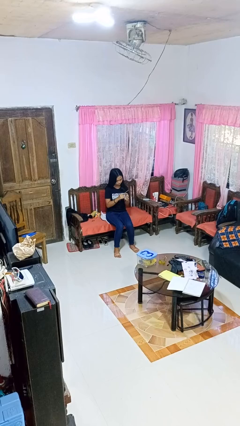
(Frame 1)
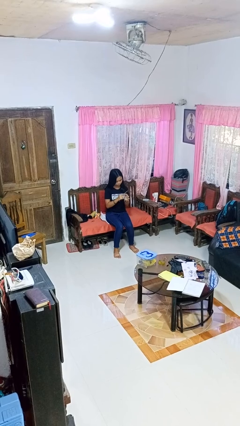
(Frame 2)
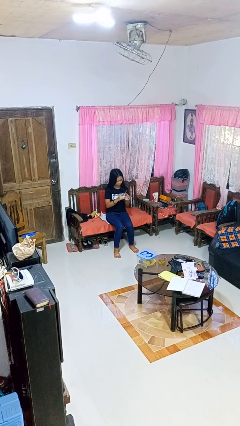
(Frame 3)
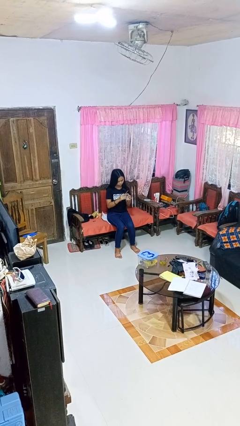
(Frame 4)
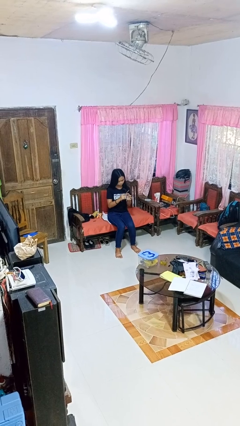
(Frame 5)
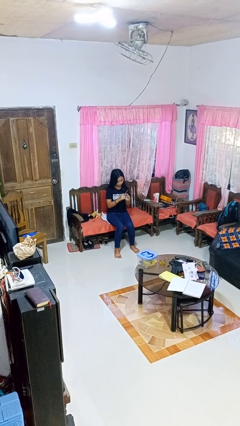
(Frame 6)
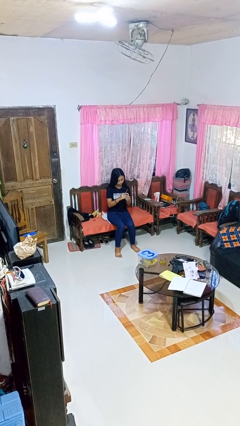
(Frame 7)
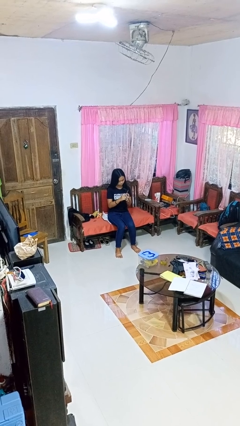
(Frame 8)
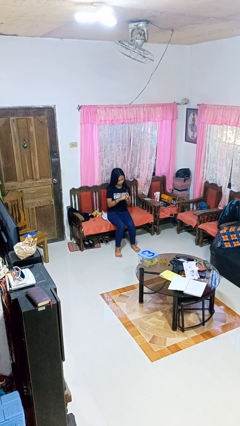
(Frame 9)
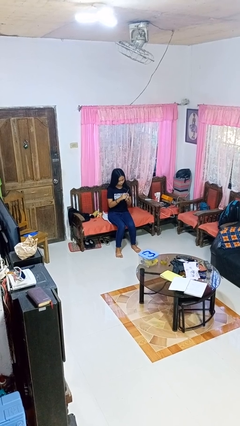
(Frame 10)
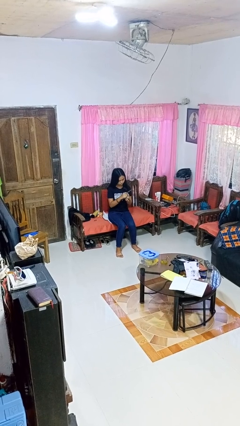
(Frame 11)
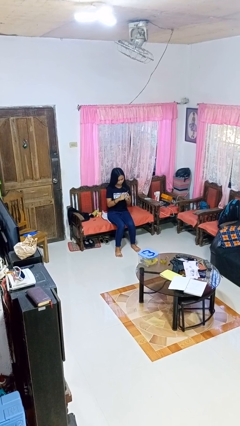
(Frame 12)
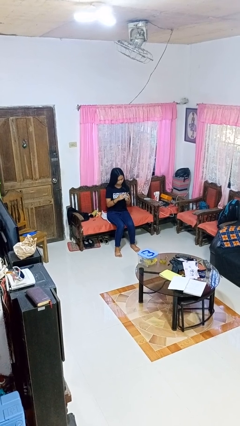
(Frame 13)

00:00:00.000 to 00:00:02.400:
person files fingernails

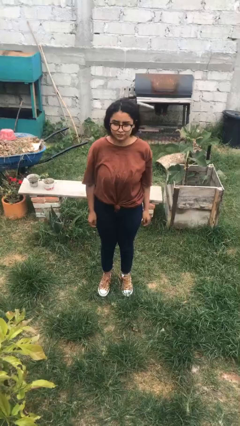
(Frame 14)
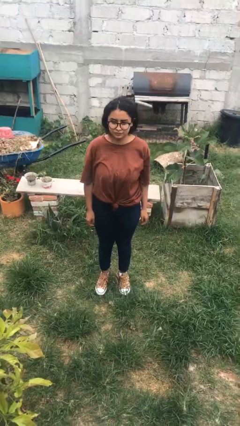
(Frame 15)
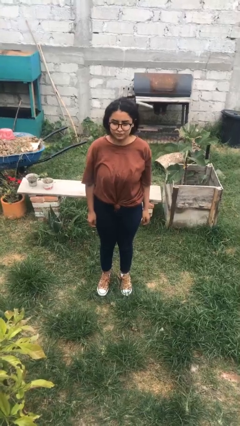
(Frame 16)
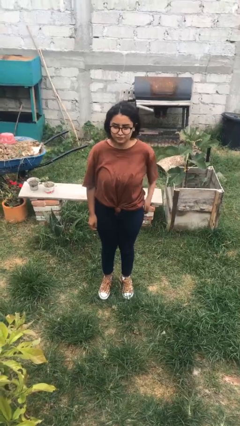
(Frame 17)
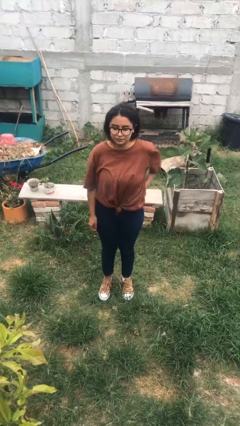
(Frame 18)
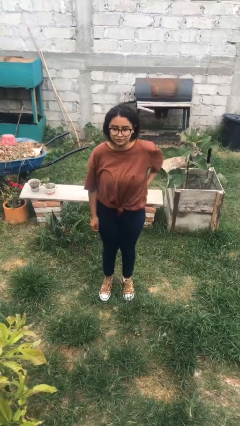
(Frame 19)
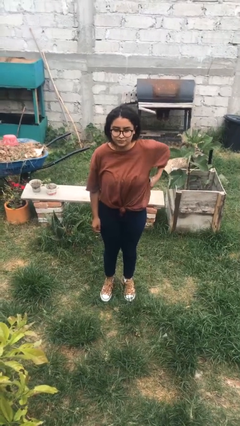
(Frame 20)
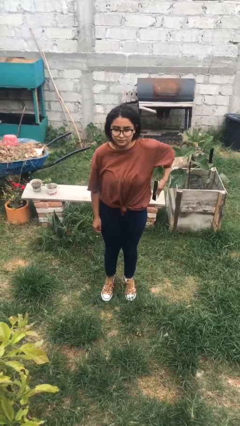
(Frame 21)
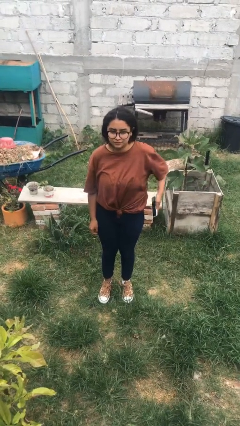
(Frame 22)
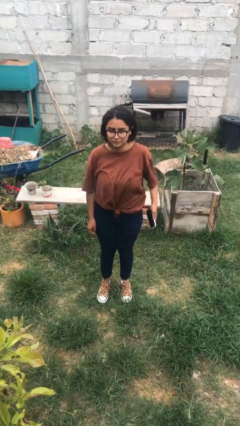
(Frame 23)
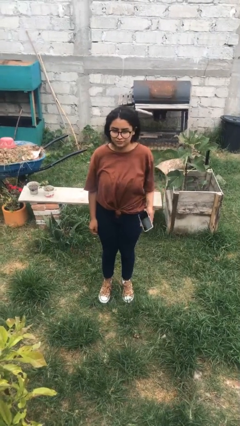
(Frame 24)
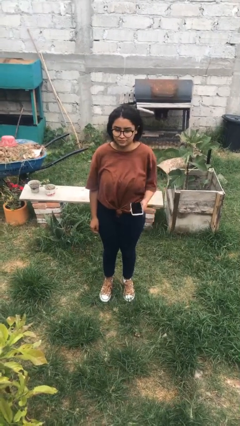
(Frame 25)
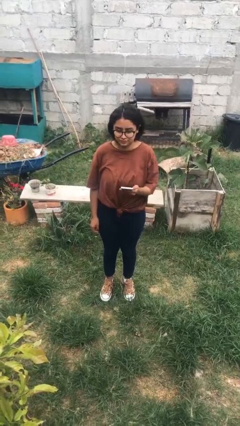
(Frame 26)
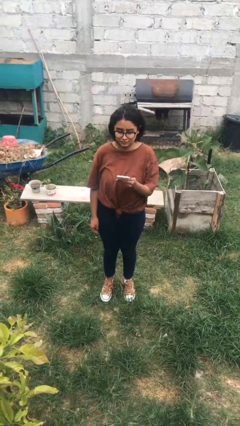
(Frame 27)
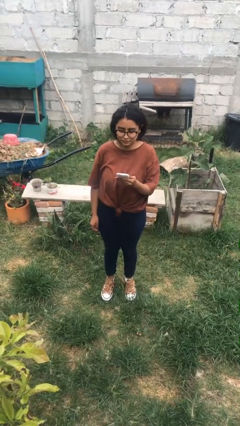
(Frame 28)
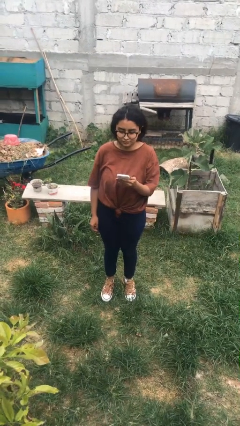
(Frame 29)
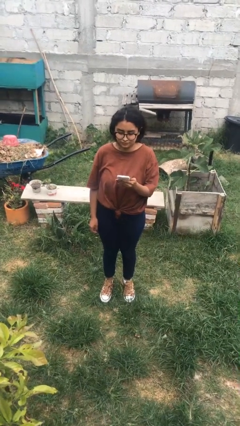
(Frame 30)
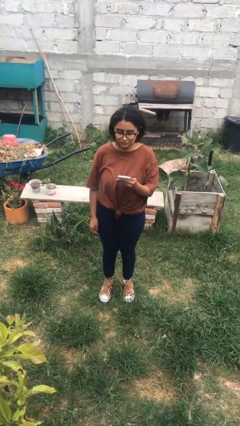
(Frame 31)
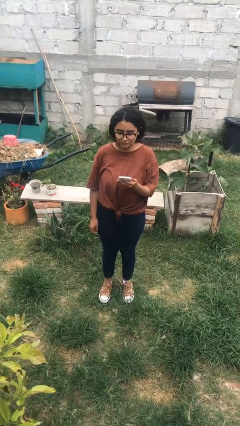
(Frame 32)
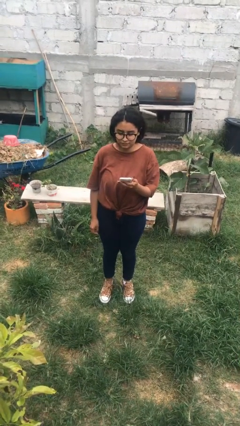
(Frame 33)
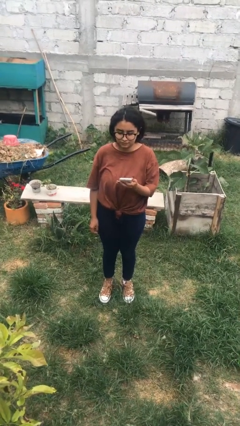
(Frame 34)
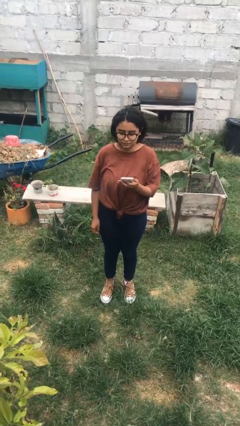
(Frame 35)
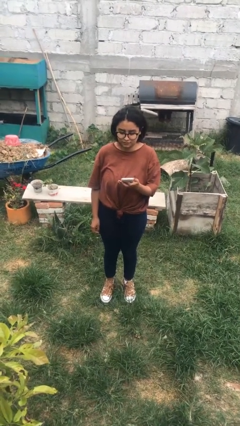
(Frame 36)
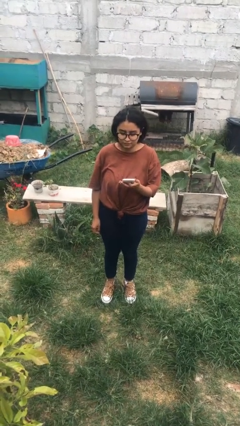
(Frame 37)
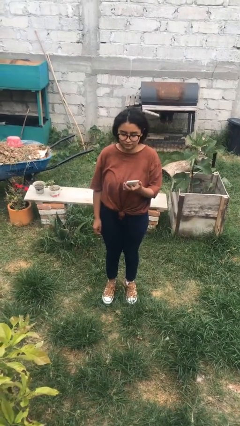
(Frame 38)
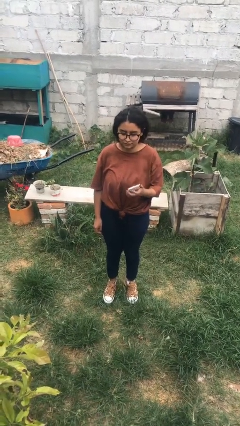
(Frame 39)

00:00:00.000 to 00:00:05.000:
person takes phone from pocket

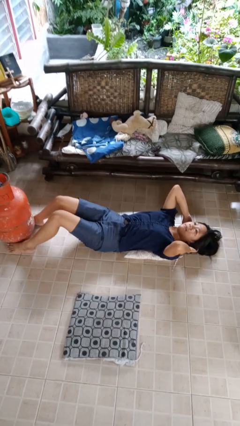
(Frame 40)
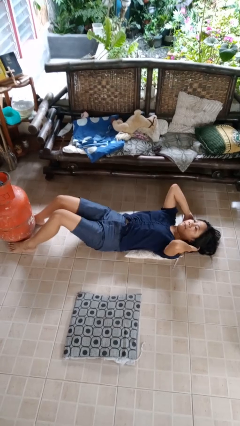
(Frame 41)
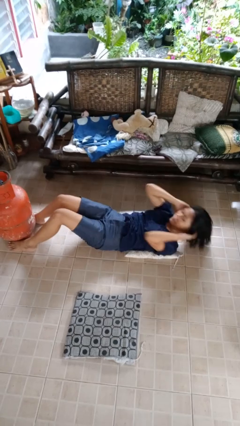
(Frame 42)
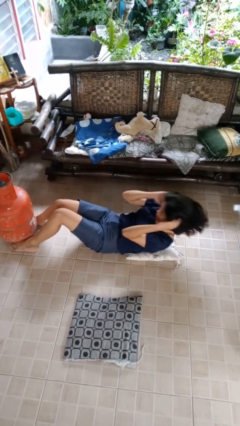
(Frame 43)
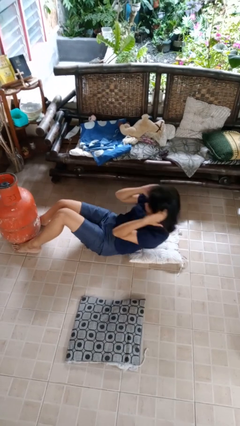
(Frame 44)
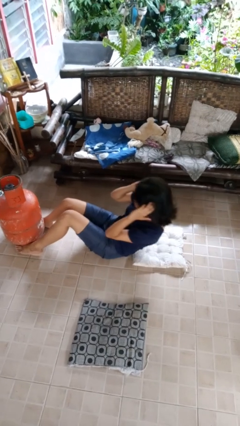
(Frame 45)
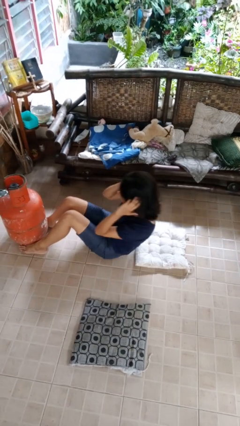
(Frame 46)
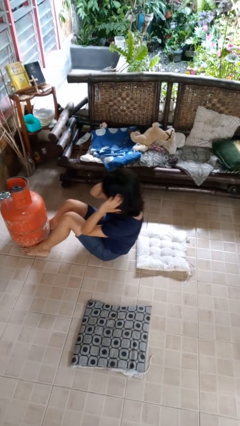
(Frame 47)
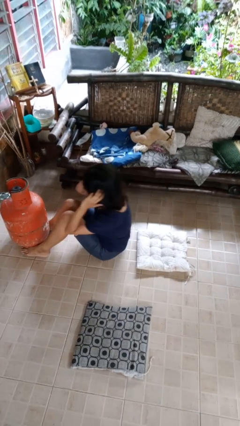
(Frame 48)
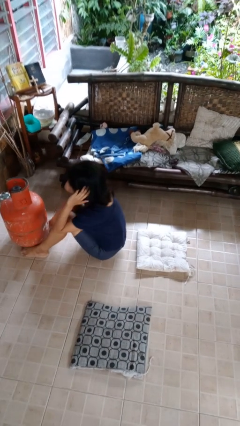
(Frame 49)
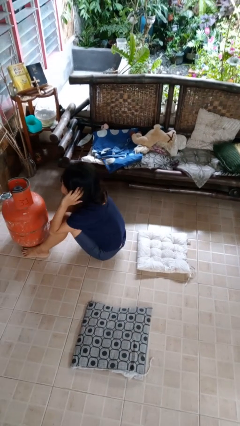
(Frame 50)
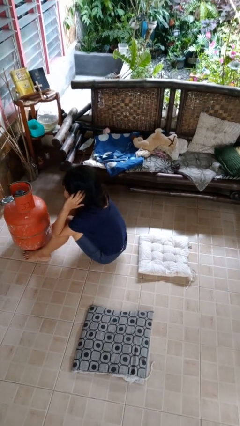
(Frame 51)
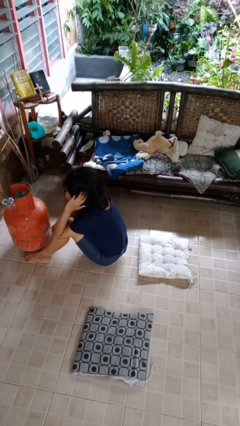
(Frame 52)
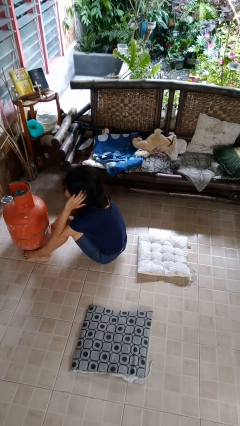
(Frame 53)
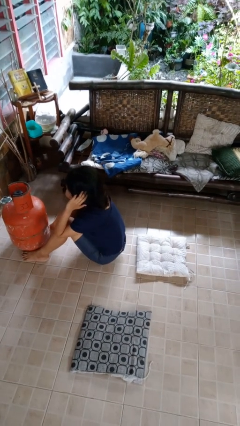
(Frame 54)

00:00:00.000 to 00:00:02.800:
person exercises with situp

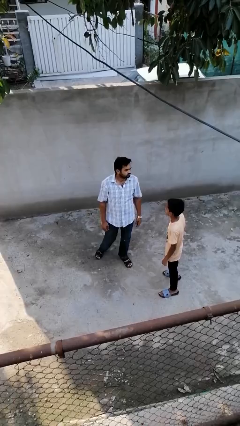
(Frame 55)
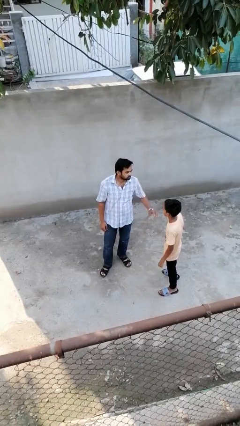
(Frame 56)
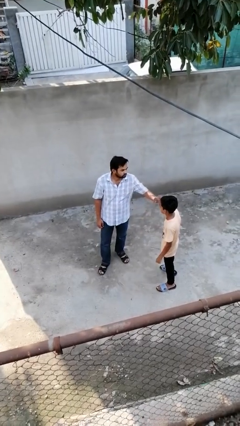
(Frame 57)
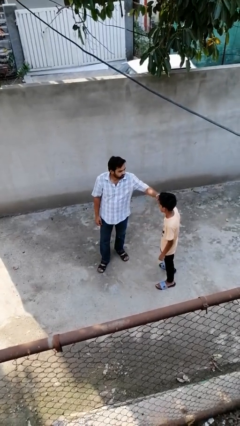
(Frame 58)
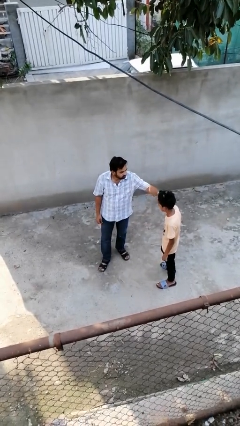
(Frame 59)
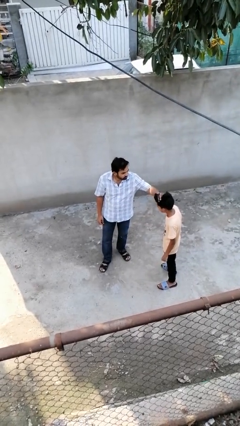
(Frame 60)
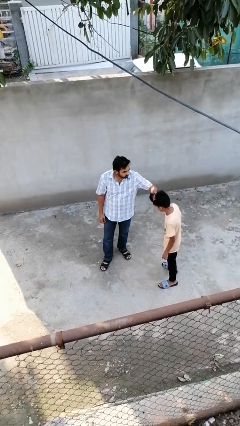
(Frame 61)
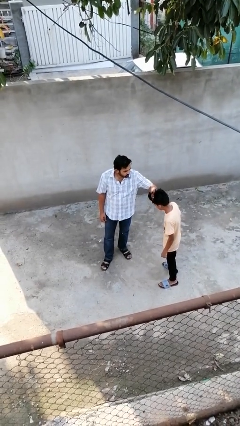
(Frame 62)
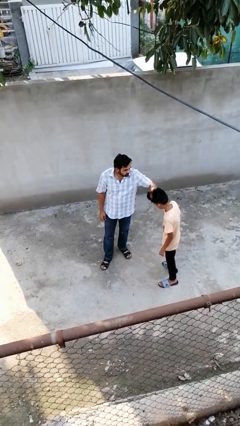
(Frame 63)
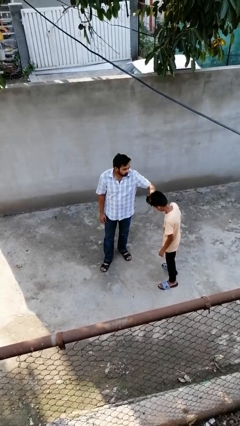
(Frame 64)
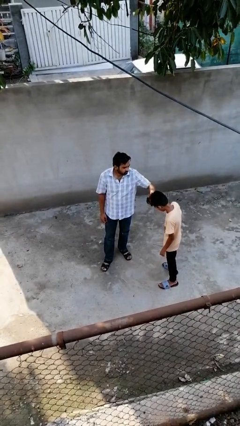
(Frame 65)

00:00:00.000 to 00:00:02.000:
person grabs person by hair

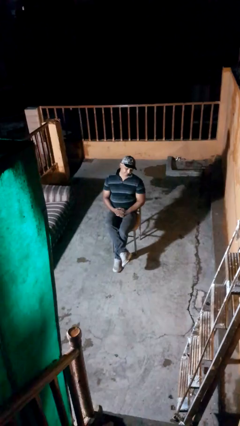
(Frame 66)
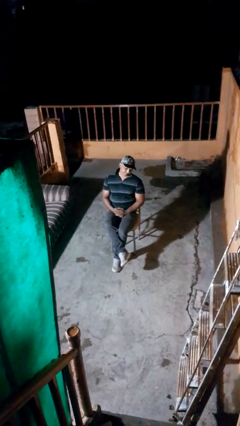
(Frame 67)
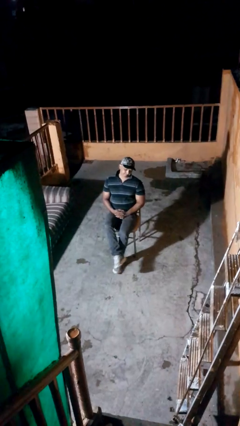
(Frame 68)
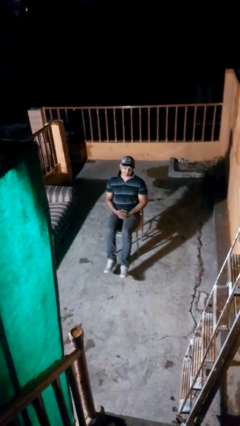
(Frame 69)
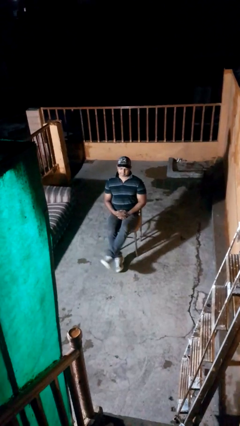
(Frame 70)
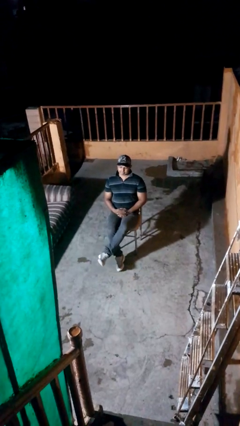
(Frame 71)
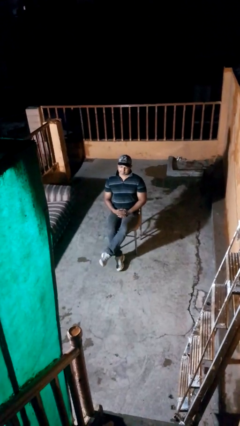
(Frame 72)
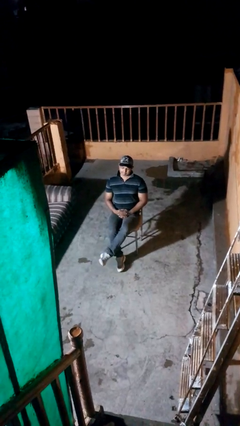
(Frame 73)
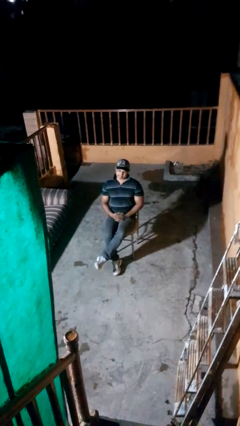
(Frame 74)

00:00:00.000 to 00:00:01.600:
person crosses legs

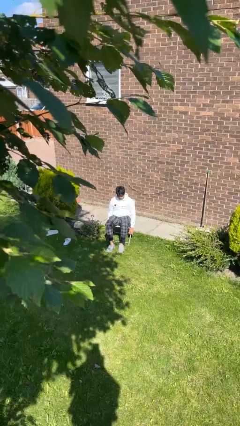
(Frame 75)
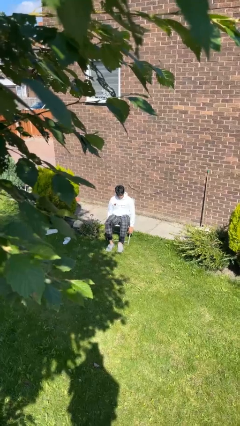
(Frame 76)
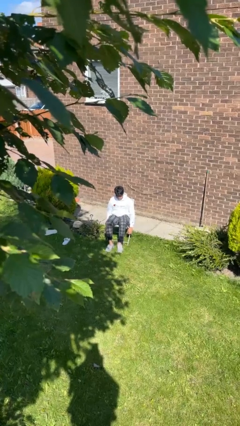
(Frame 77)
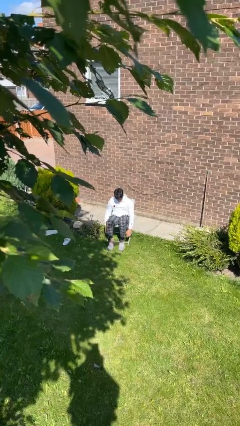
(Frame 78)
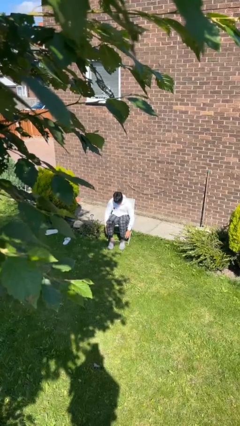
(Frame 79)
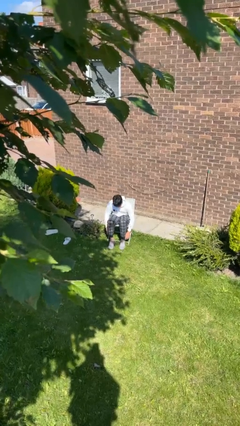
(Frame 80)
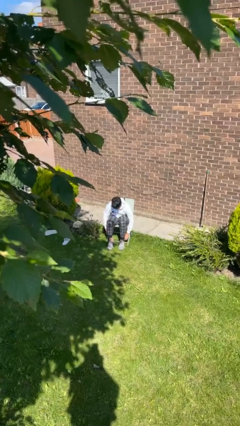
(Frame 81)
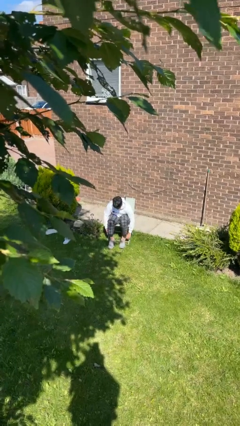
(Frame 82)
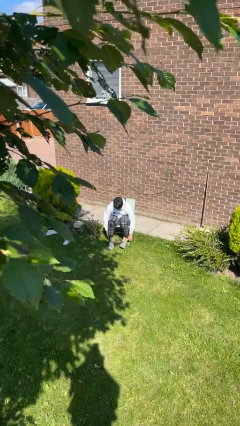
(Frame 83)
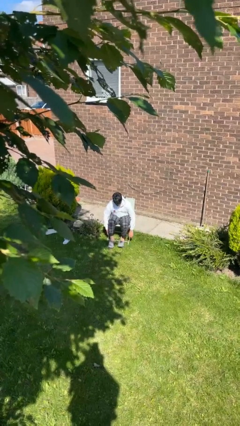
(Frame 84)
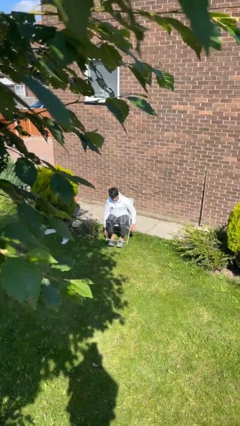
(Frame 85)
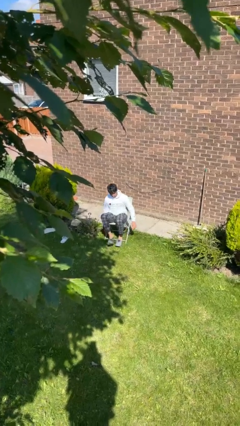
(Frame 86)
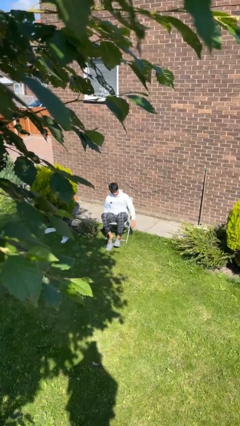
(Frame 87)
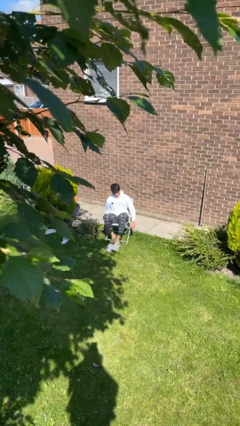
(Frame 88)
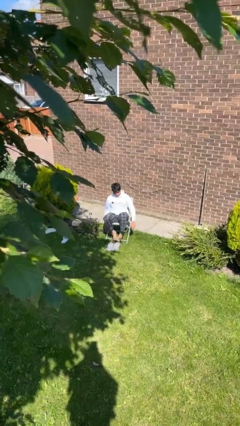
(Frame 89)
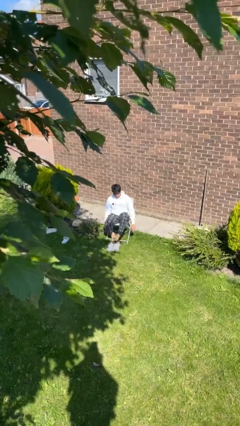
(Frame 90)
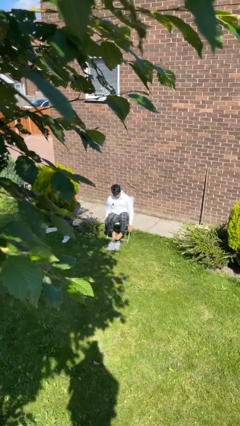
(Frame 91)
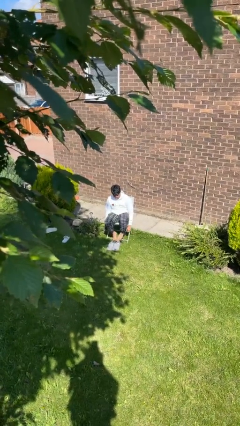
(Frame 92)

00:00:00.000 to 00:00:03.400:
person takes off shoes
